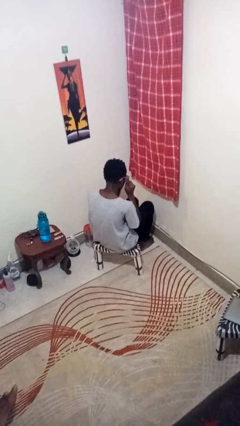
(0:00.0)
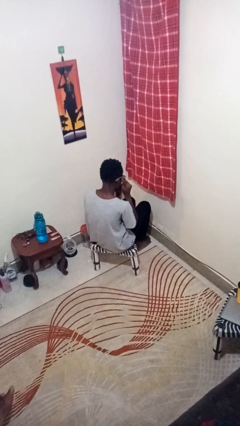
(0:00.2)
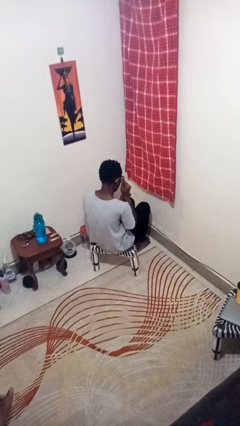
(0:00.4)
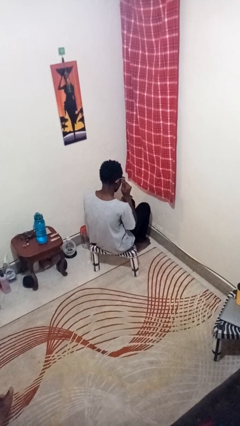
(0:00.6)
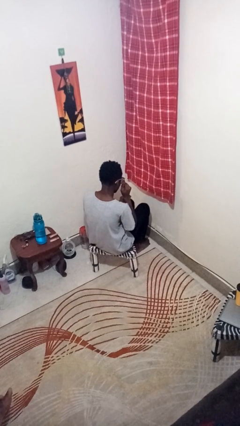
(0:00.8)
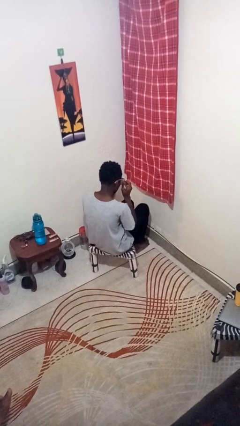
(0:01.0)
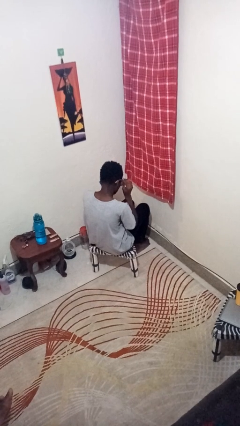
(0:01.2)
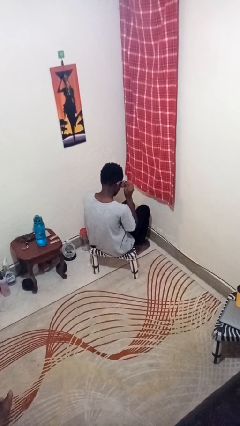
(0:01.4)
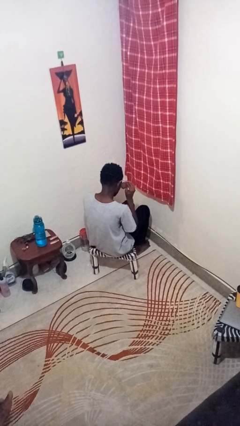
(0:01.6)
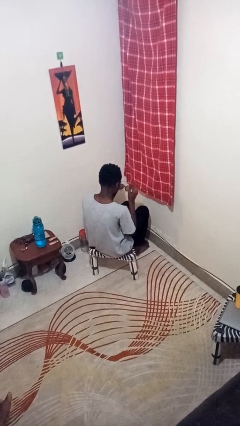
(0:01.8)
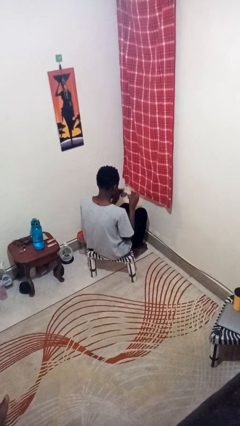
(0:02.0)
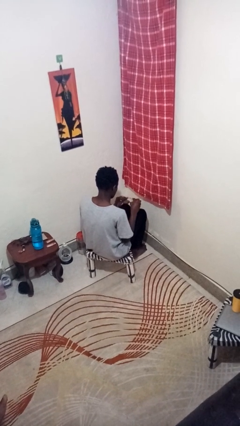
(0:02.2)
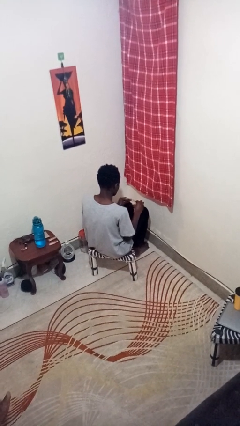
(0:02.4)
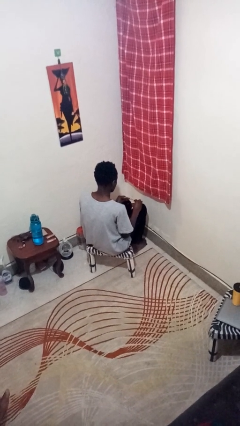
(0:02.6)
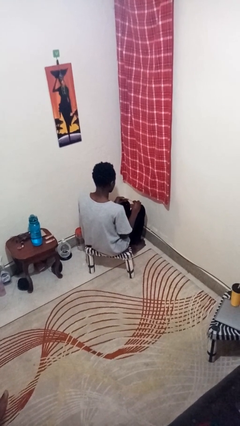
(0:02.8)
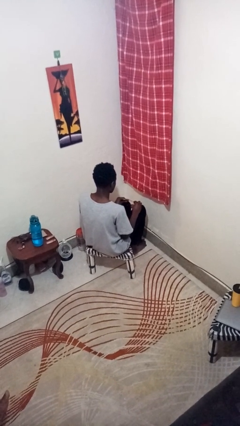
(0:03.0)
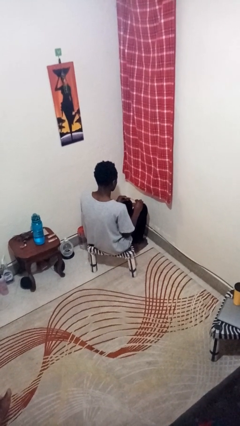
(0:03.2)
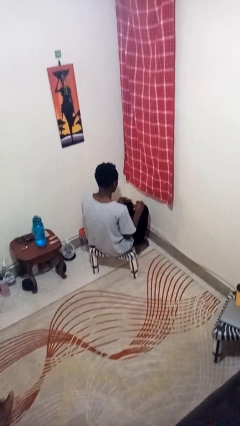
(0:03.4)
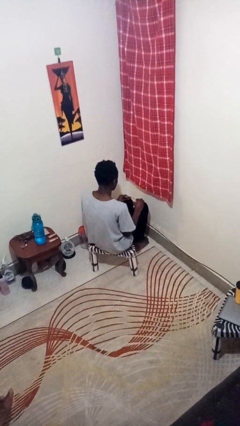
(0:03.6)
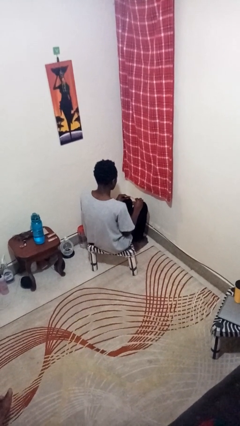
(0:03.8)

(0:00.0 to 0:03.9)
person takes off glasses

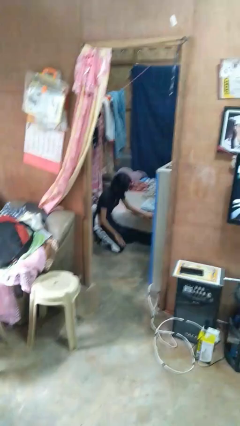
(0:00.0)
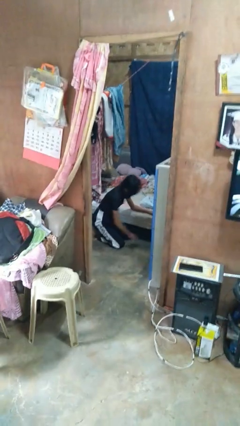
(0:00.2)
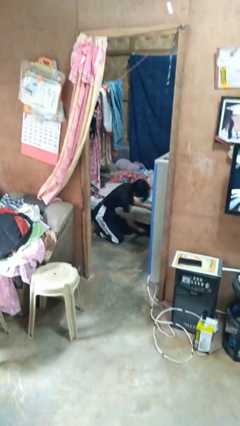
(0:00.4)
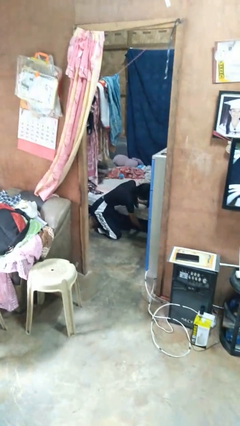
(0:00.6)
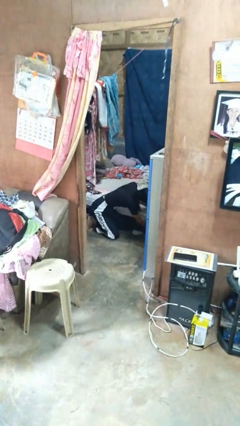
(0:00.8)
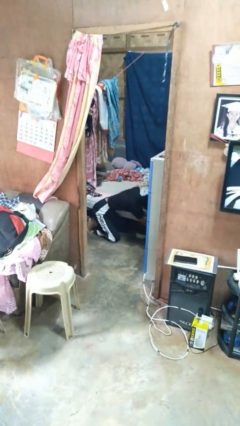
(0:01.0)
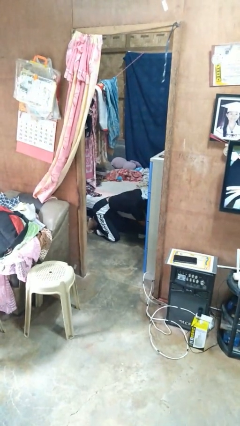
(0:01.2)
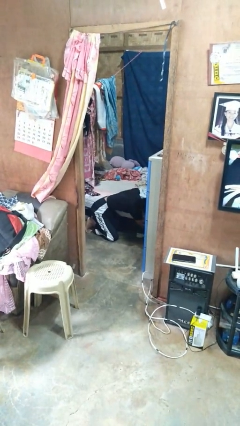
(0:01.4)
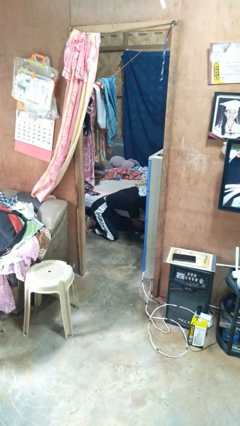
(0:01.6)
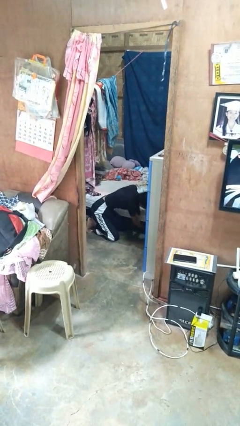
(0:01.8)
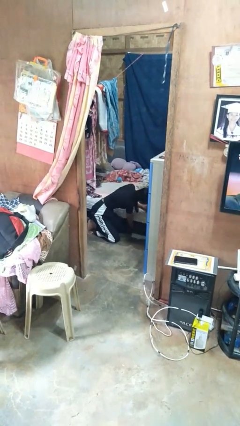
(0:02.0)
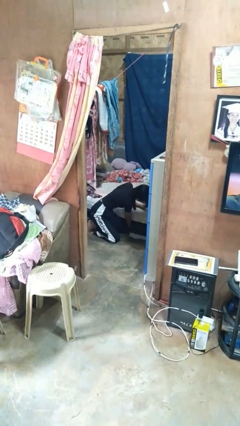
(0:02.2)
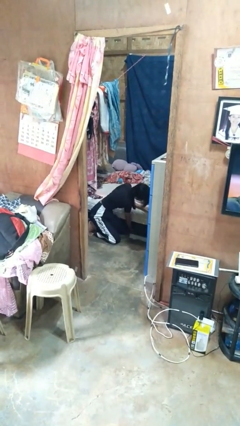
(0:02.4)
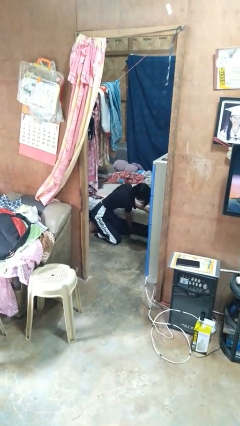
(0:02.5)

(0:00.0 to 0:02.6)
person searches under bed

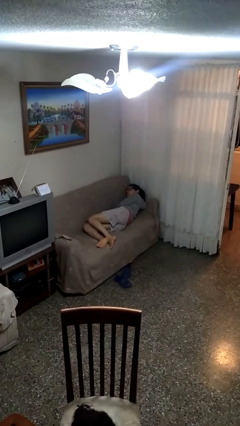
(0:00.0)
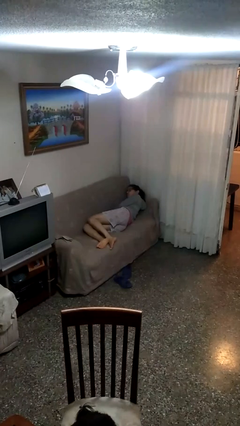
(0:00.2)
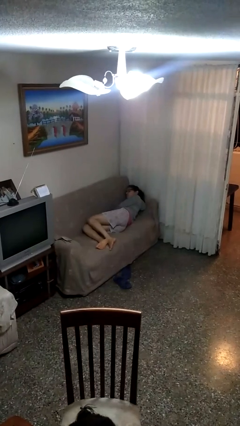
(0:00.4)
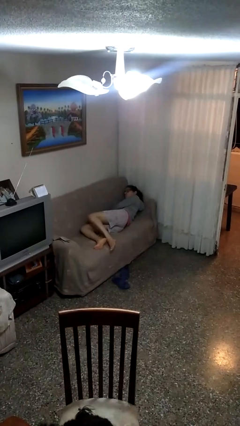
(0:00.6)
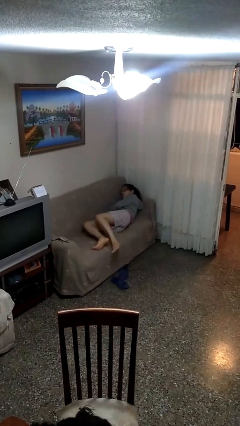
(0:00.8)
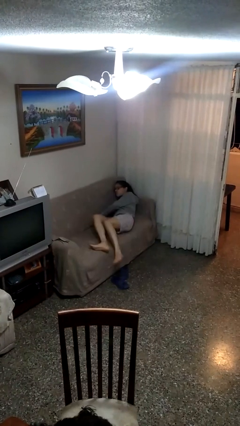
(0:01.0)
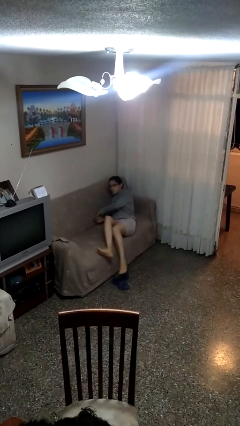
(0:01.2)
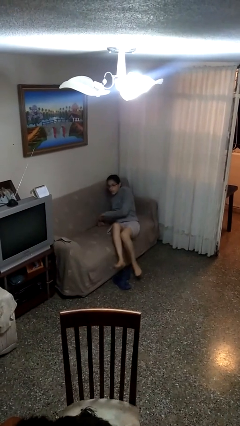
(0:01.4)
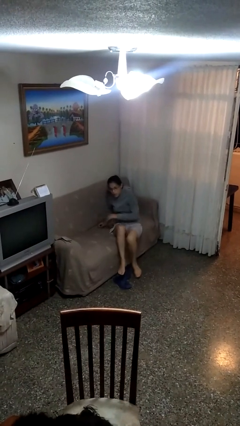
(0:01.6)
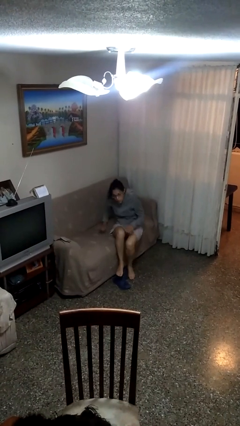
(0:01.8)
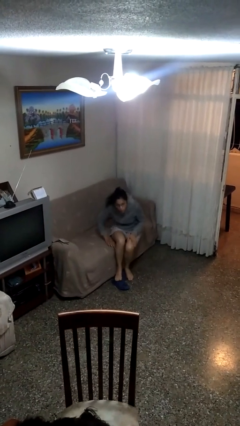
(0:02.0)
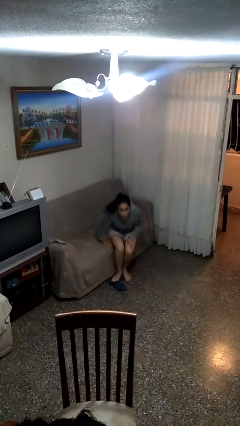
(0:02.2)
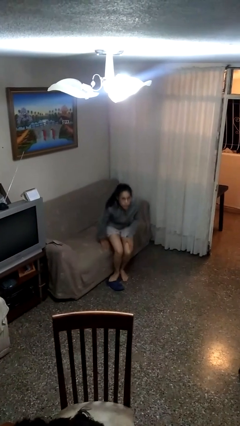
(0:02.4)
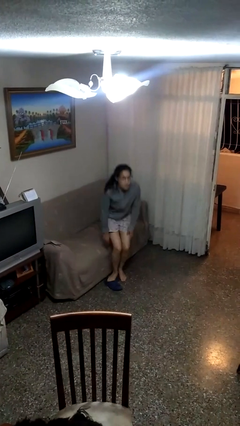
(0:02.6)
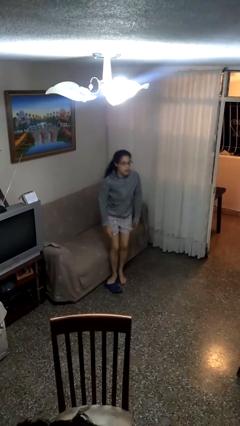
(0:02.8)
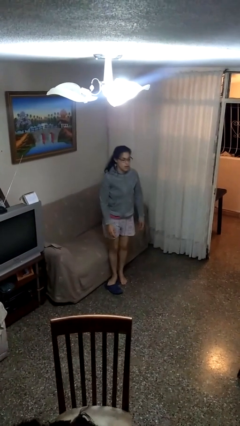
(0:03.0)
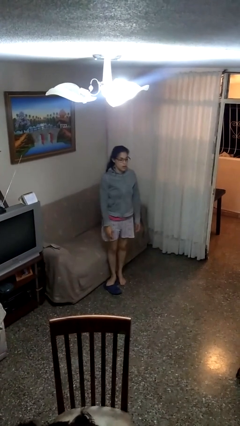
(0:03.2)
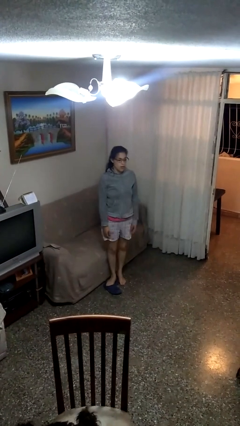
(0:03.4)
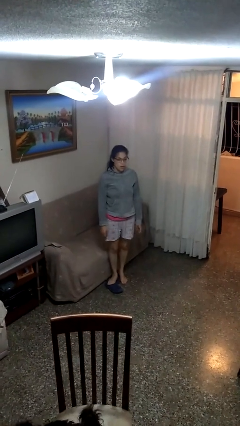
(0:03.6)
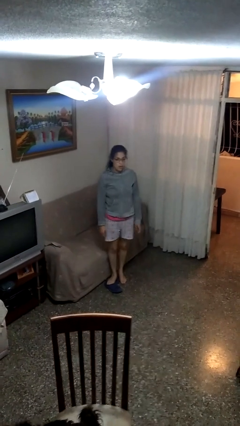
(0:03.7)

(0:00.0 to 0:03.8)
person stands up

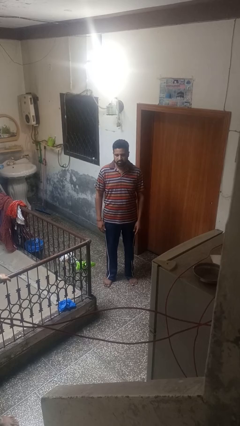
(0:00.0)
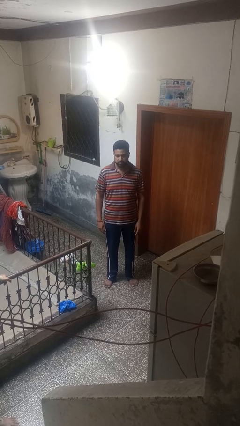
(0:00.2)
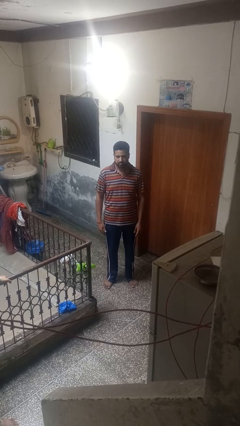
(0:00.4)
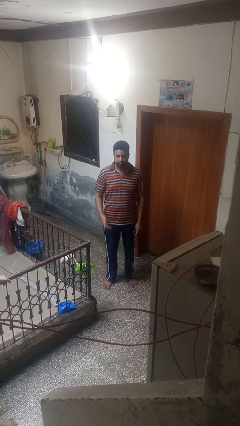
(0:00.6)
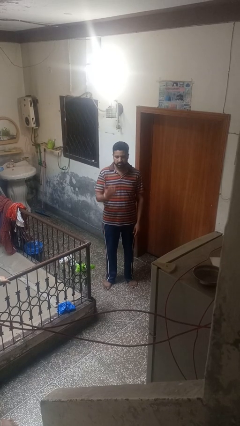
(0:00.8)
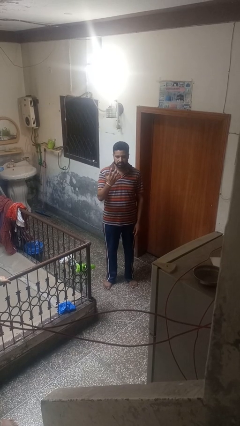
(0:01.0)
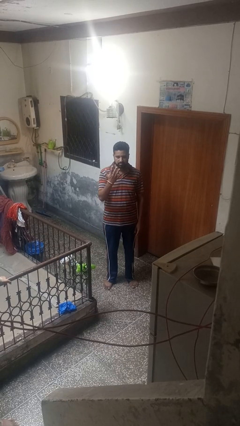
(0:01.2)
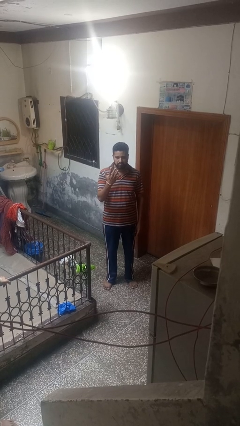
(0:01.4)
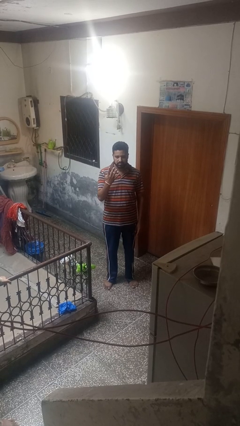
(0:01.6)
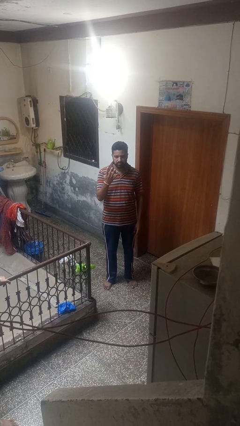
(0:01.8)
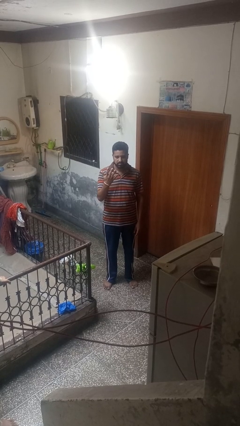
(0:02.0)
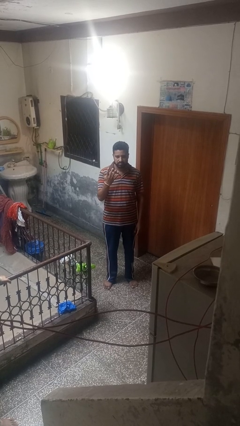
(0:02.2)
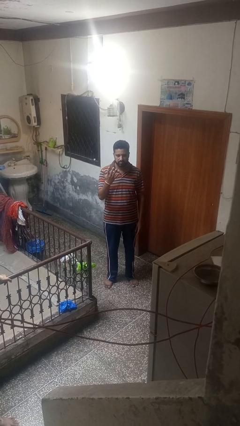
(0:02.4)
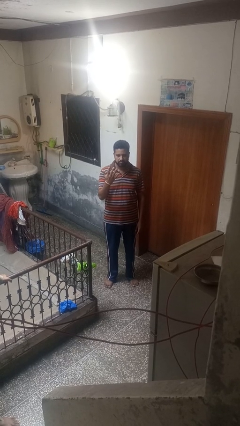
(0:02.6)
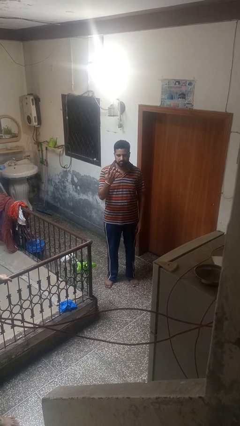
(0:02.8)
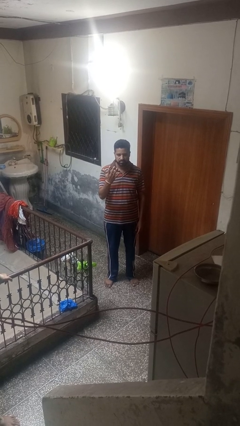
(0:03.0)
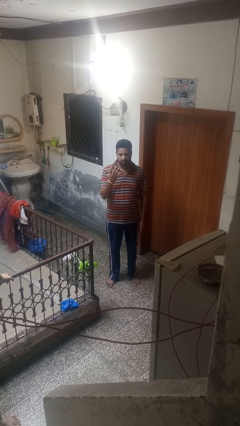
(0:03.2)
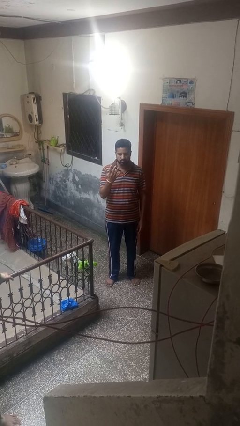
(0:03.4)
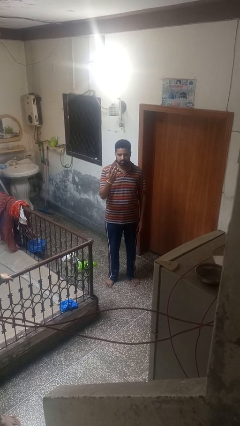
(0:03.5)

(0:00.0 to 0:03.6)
person gestures number five

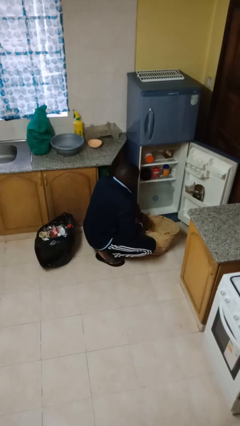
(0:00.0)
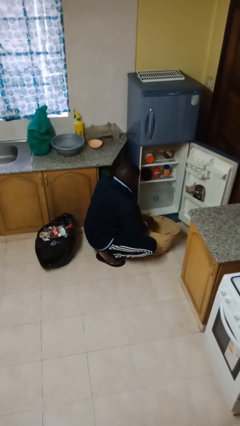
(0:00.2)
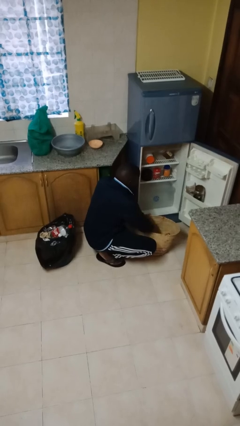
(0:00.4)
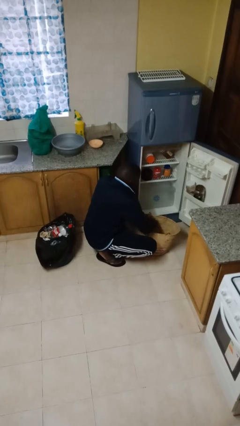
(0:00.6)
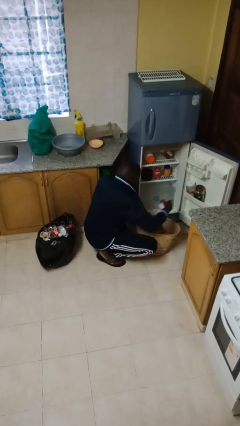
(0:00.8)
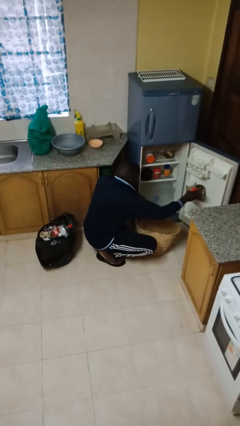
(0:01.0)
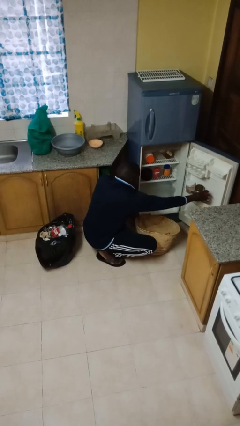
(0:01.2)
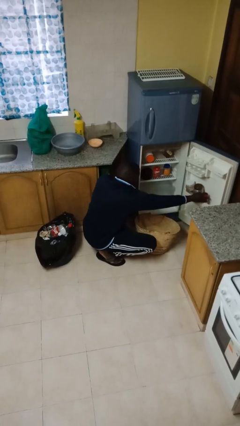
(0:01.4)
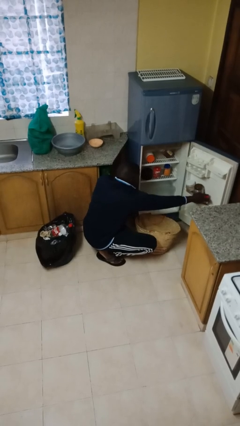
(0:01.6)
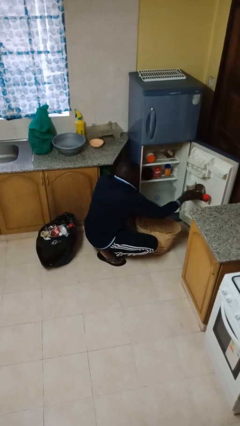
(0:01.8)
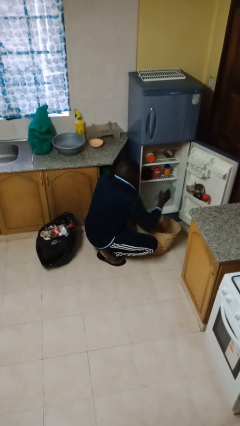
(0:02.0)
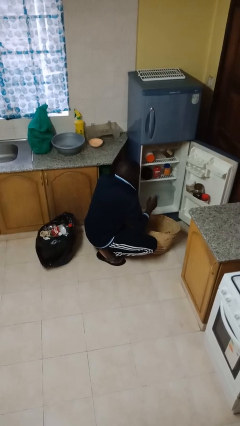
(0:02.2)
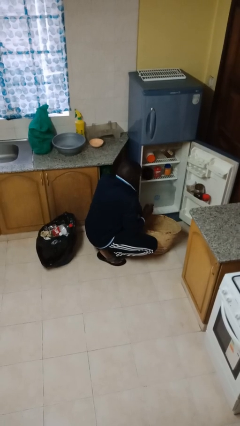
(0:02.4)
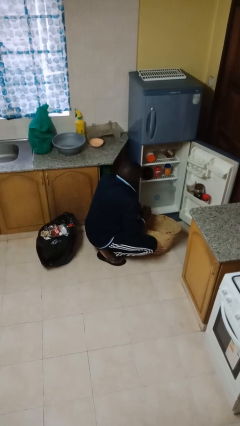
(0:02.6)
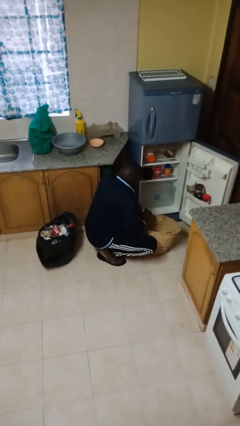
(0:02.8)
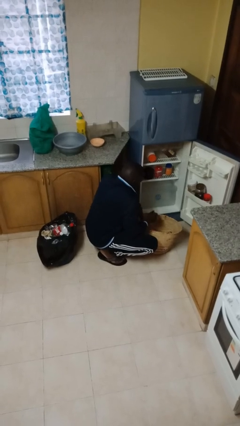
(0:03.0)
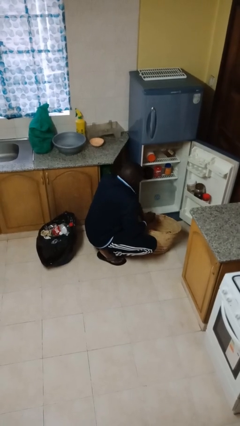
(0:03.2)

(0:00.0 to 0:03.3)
person loads groceries into refrigerator
